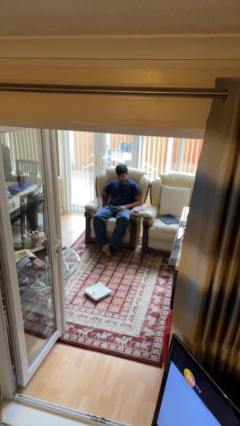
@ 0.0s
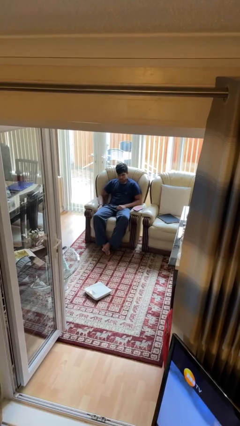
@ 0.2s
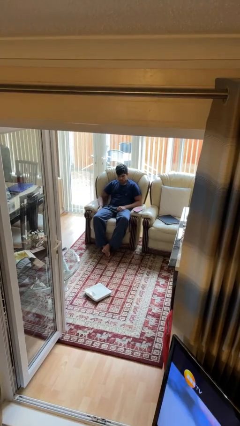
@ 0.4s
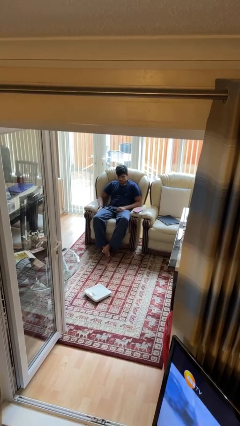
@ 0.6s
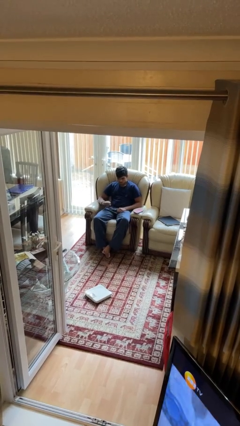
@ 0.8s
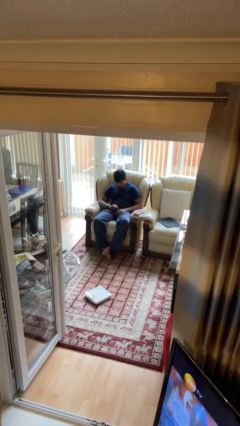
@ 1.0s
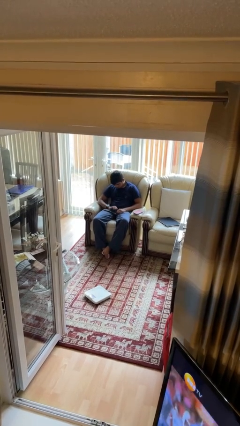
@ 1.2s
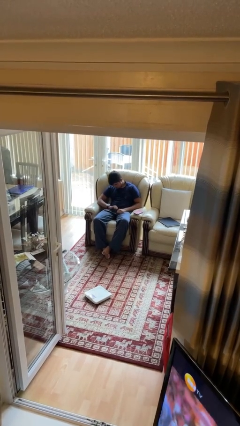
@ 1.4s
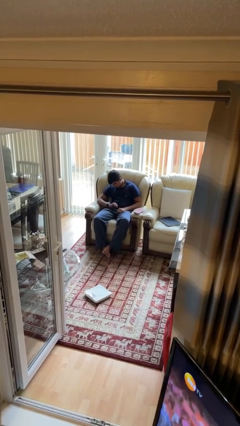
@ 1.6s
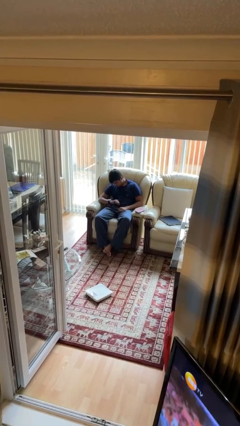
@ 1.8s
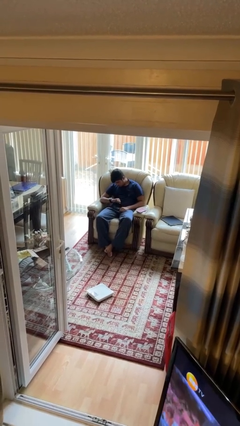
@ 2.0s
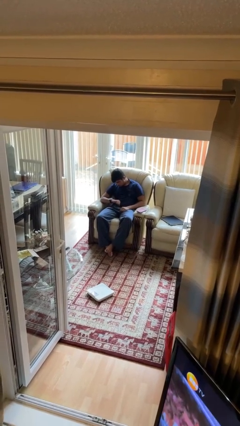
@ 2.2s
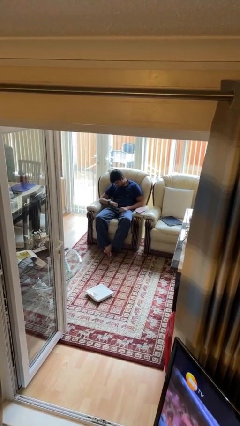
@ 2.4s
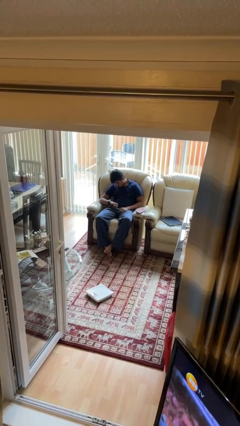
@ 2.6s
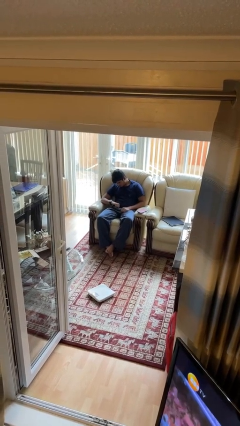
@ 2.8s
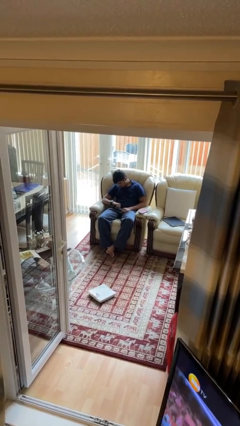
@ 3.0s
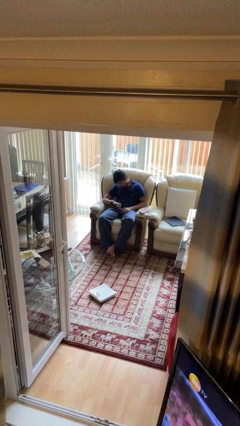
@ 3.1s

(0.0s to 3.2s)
person looks at wristwatch

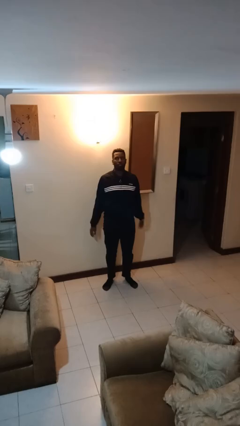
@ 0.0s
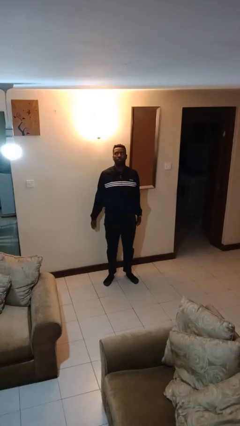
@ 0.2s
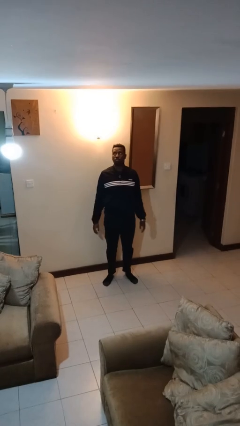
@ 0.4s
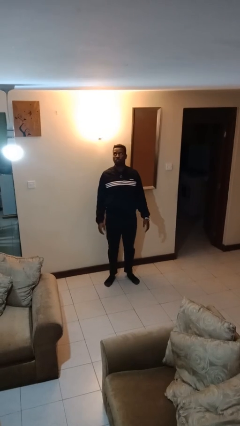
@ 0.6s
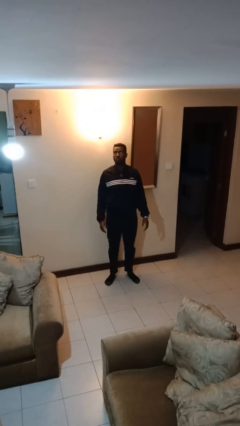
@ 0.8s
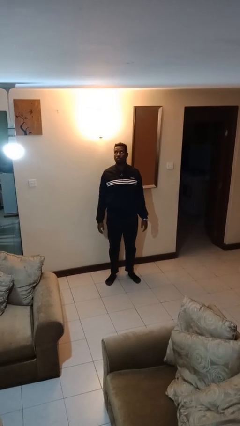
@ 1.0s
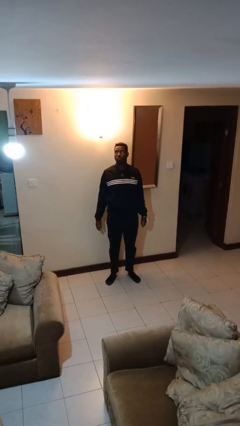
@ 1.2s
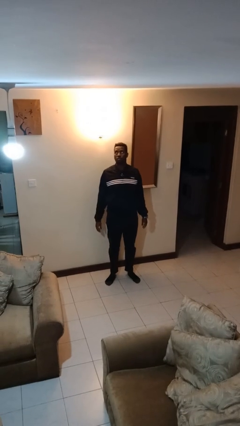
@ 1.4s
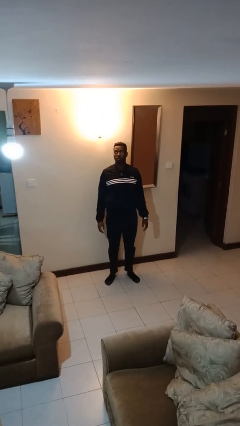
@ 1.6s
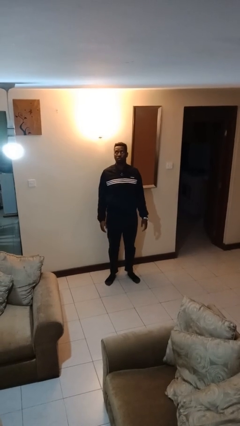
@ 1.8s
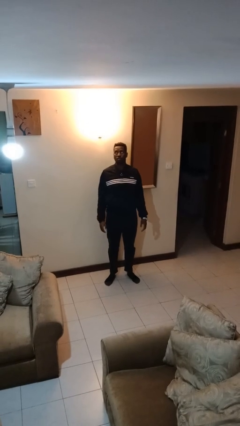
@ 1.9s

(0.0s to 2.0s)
person stands up

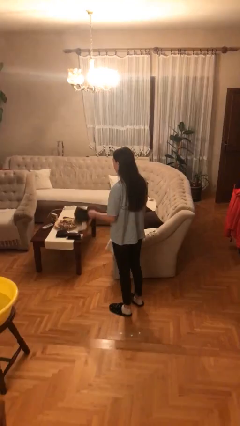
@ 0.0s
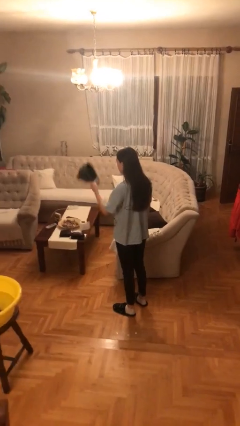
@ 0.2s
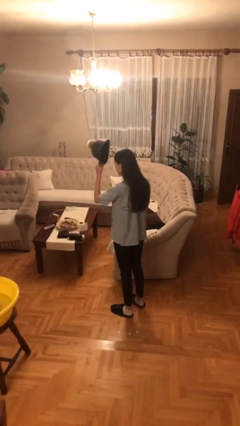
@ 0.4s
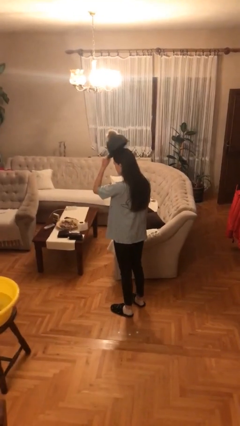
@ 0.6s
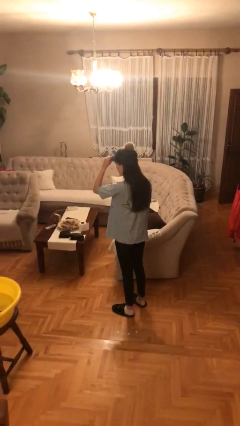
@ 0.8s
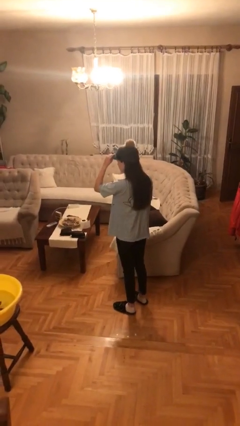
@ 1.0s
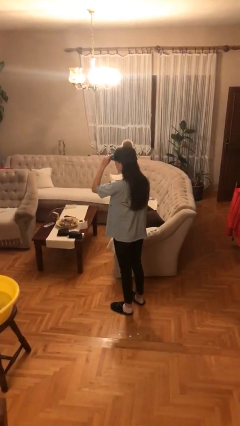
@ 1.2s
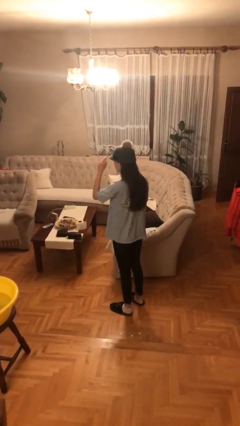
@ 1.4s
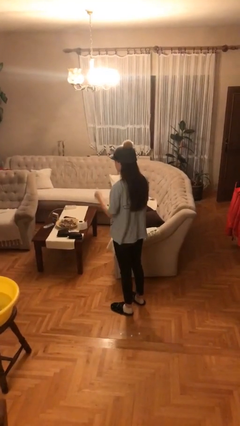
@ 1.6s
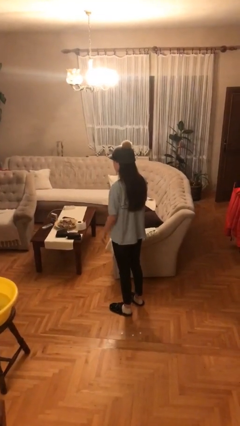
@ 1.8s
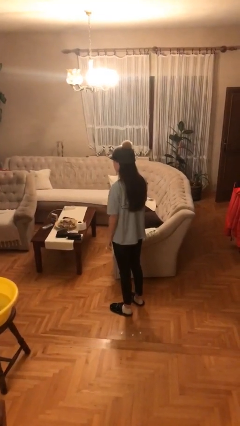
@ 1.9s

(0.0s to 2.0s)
person puts on hat

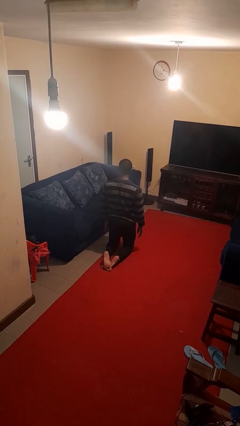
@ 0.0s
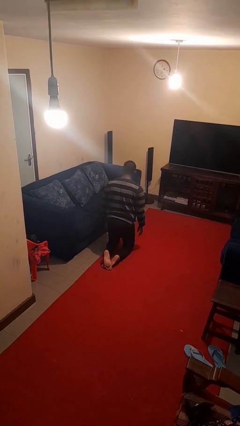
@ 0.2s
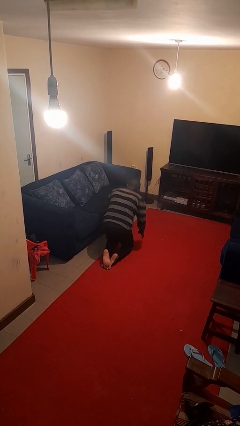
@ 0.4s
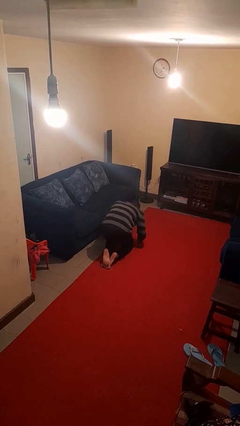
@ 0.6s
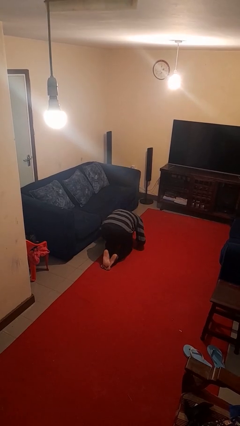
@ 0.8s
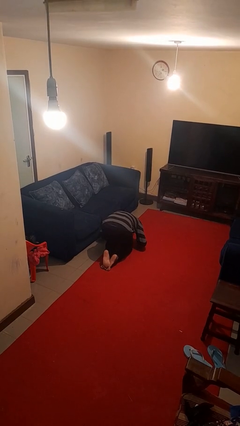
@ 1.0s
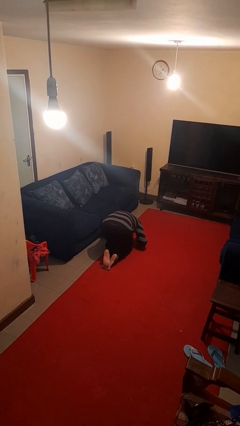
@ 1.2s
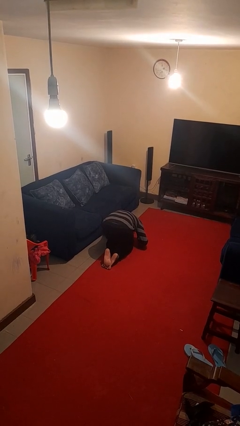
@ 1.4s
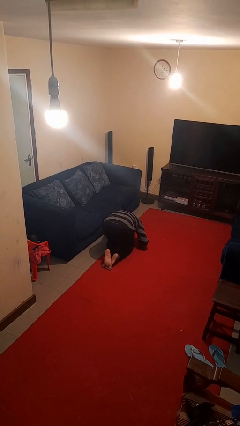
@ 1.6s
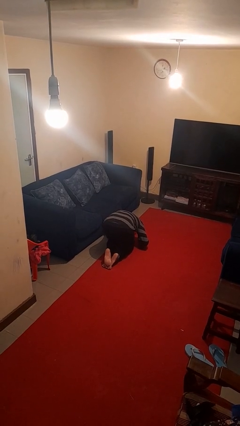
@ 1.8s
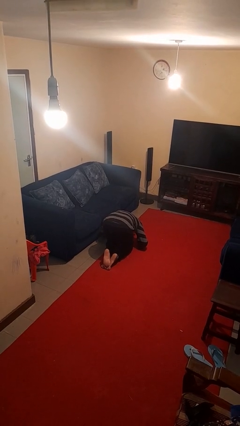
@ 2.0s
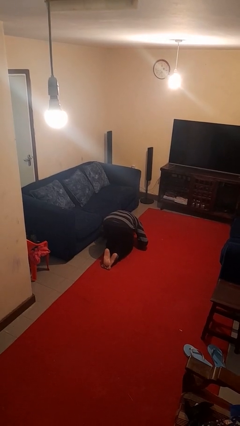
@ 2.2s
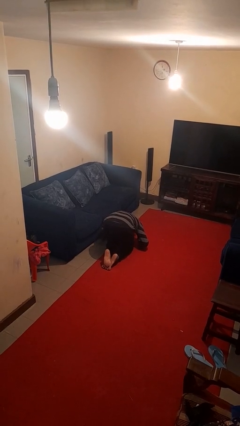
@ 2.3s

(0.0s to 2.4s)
person searches under couch

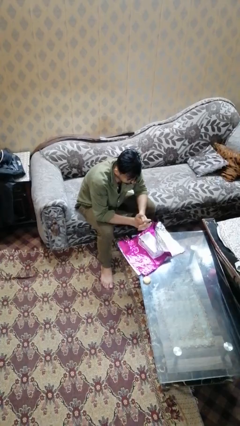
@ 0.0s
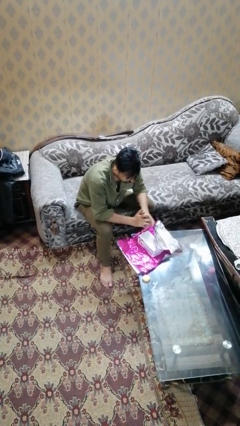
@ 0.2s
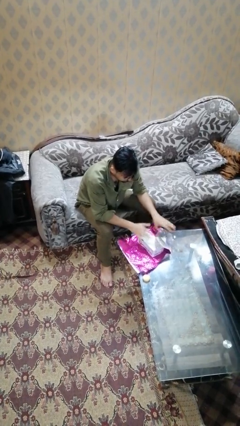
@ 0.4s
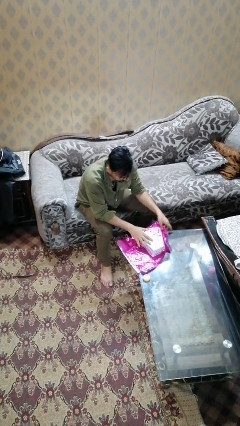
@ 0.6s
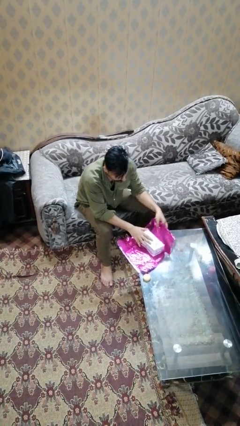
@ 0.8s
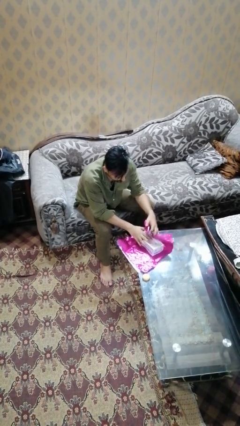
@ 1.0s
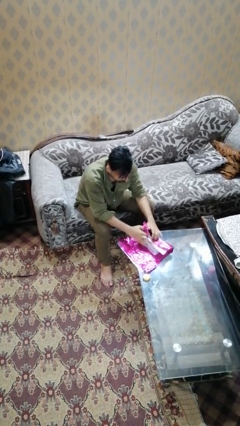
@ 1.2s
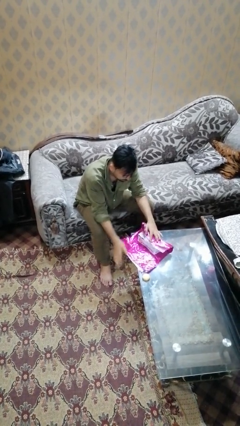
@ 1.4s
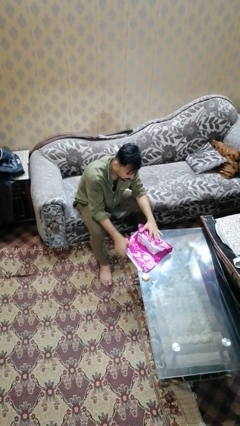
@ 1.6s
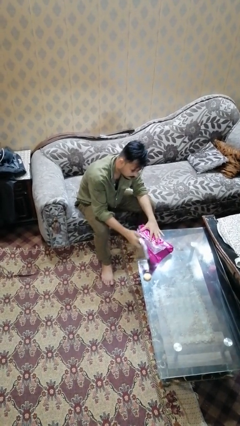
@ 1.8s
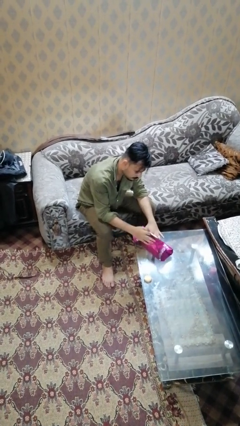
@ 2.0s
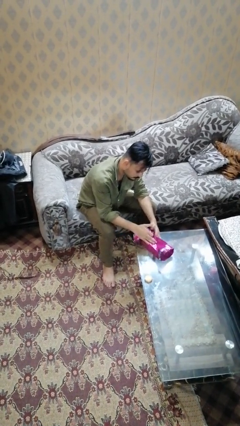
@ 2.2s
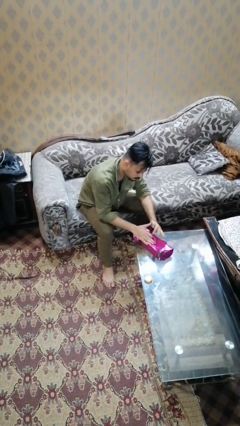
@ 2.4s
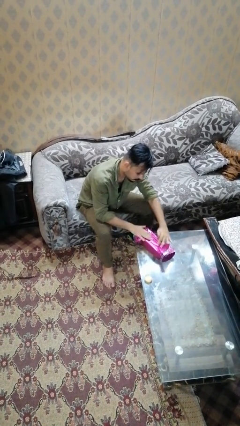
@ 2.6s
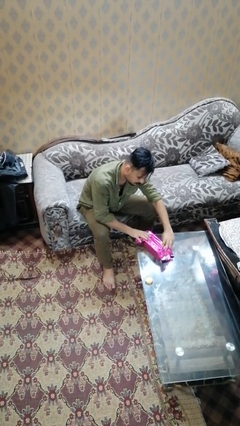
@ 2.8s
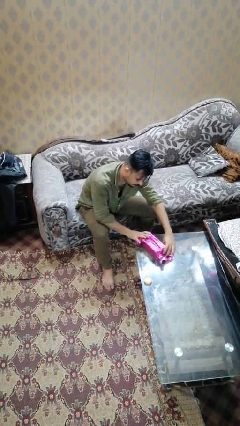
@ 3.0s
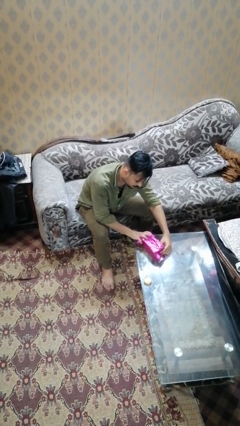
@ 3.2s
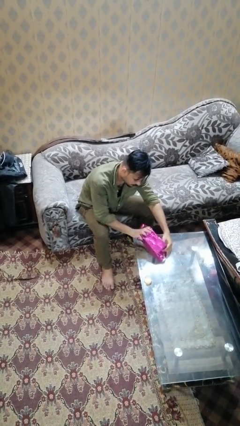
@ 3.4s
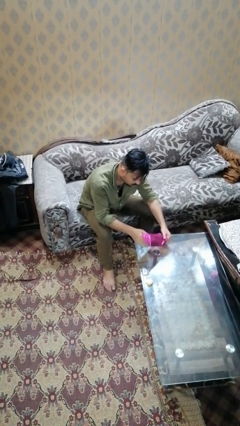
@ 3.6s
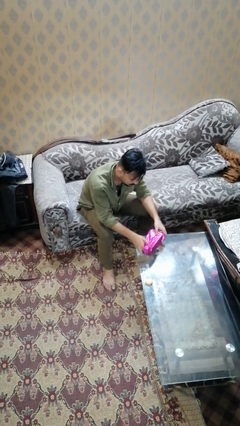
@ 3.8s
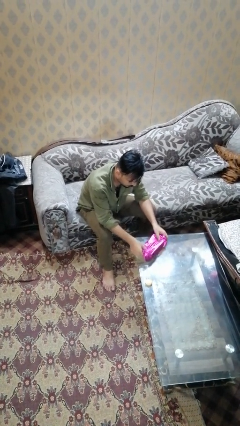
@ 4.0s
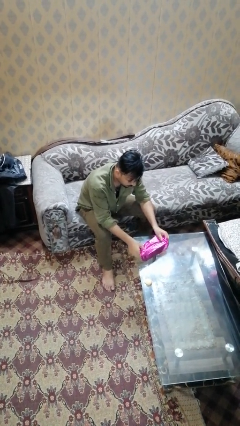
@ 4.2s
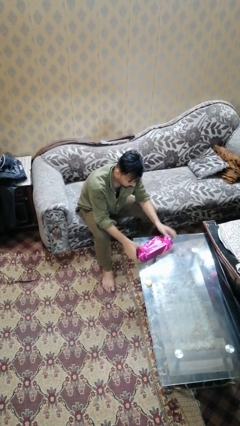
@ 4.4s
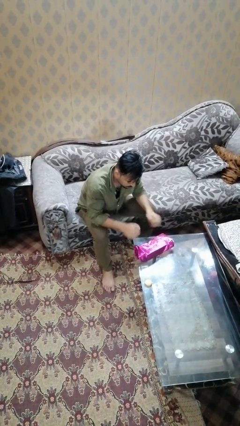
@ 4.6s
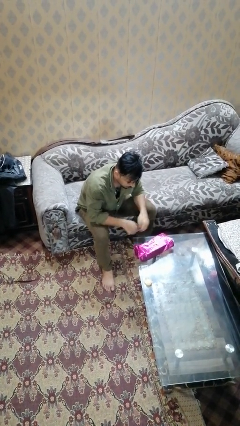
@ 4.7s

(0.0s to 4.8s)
person wraps box

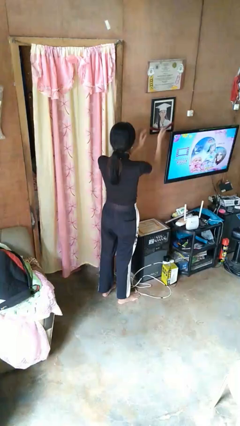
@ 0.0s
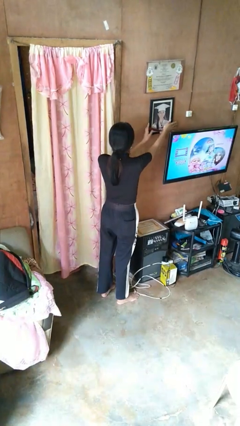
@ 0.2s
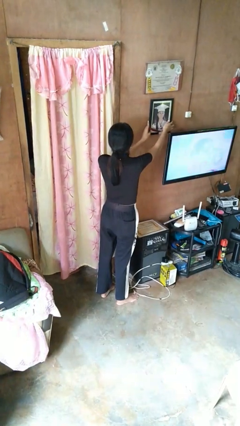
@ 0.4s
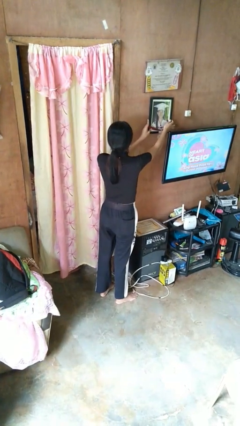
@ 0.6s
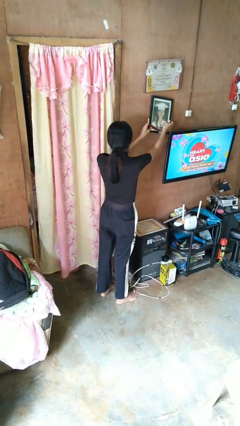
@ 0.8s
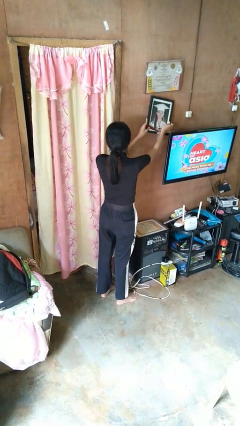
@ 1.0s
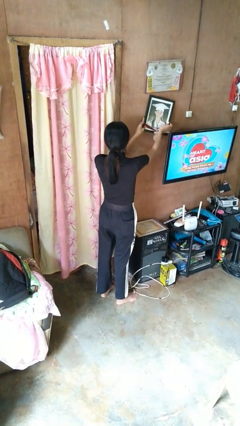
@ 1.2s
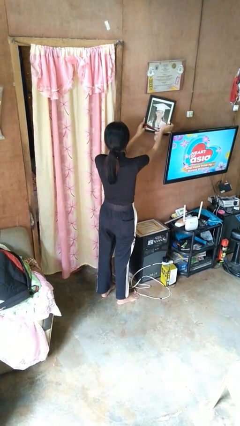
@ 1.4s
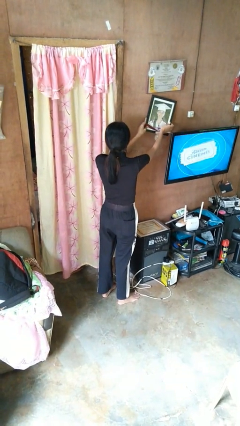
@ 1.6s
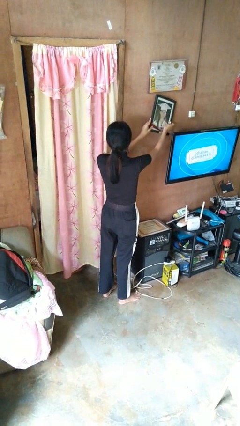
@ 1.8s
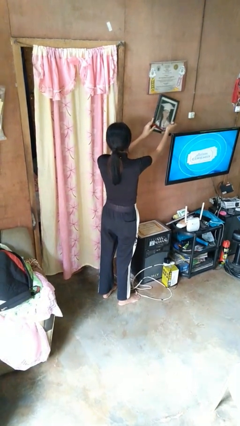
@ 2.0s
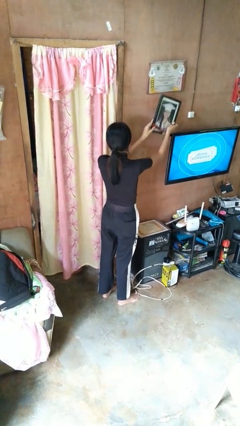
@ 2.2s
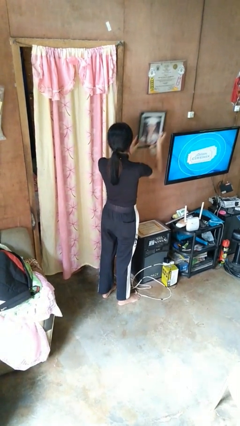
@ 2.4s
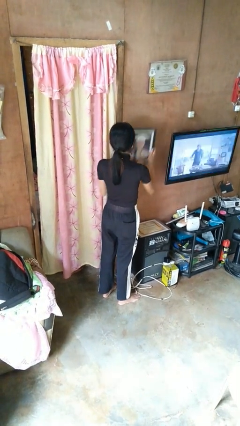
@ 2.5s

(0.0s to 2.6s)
person takes down picture frame
